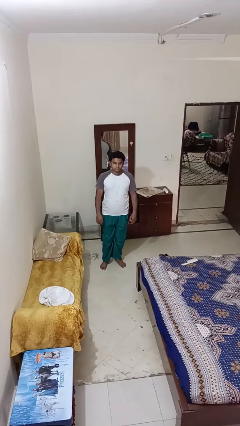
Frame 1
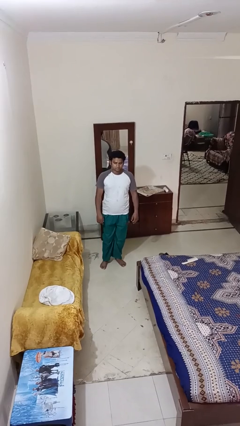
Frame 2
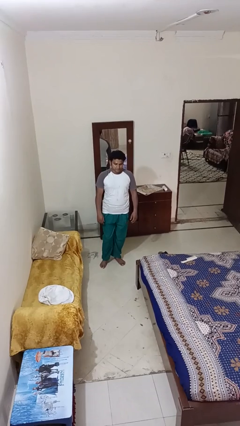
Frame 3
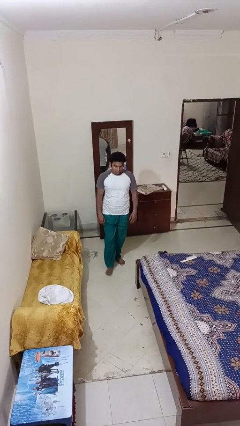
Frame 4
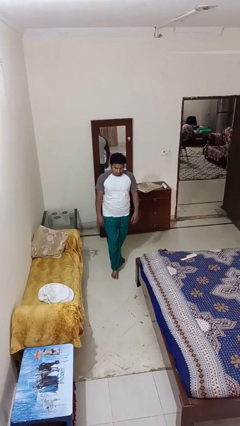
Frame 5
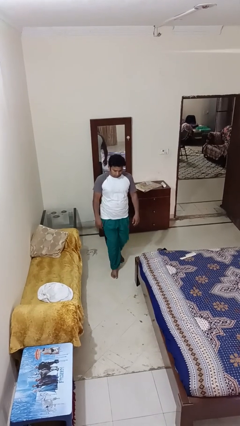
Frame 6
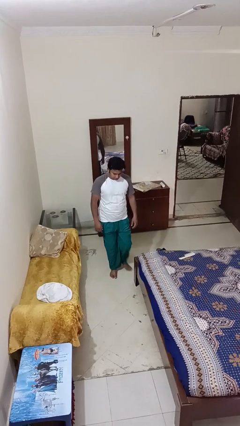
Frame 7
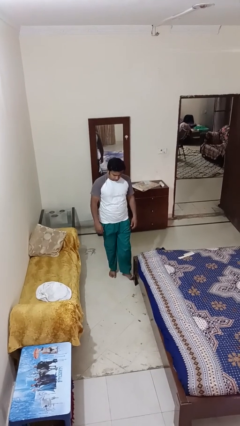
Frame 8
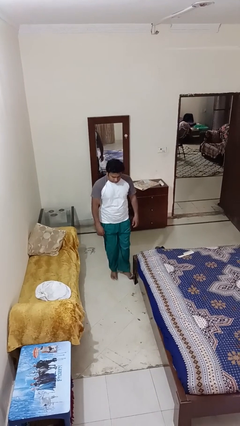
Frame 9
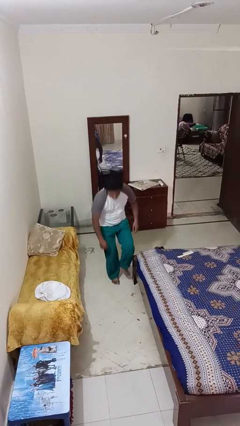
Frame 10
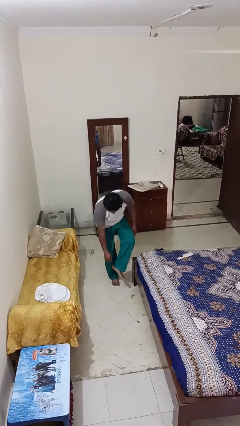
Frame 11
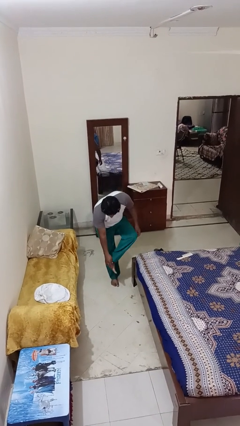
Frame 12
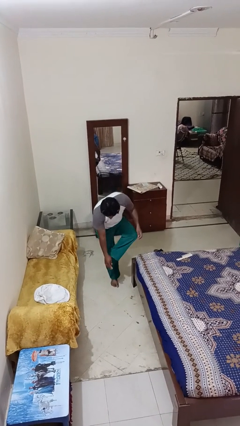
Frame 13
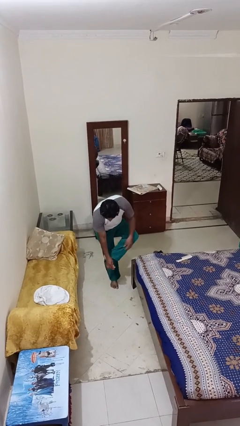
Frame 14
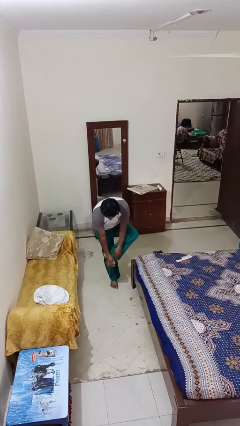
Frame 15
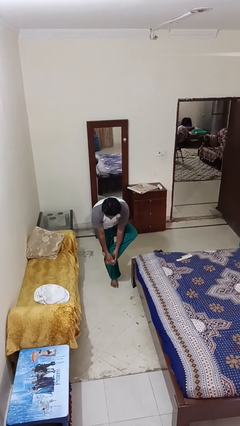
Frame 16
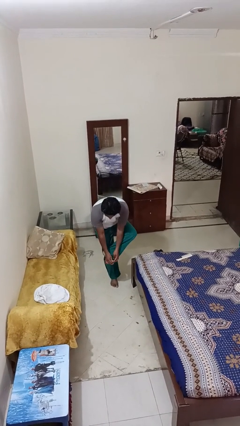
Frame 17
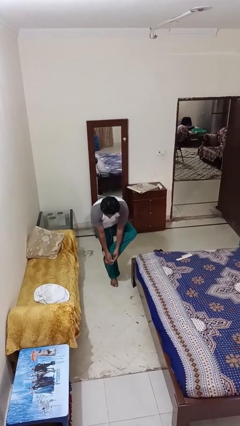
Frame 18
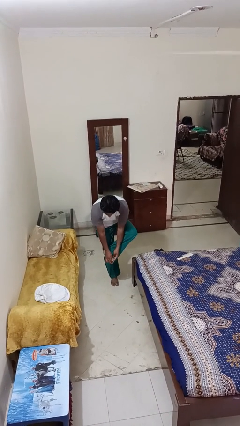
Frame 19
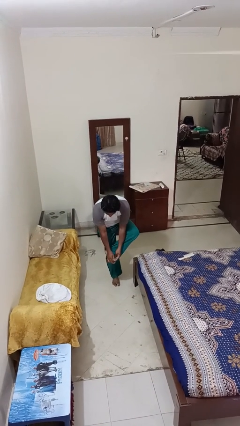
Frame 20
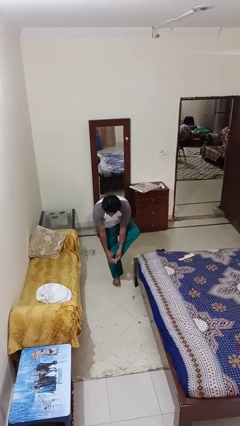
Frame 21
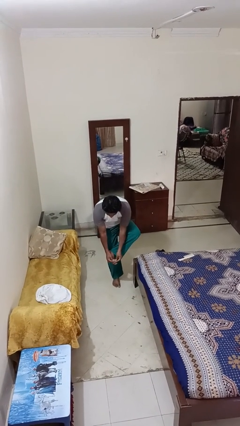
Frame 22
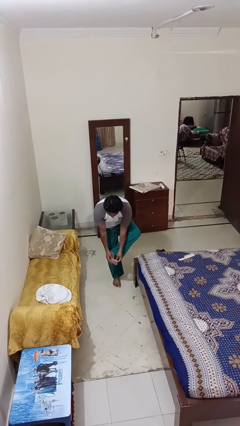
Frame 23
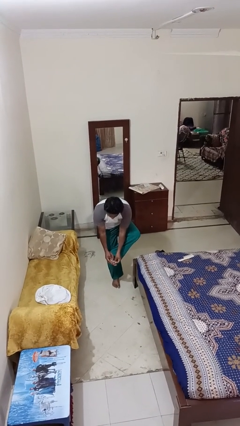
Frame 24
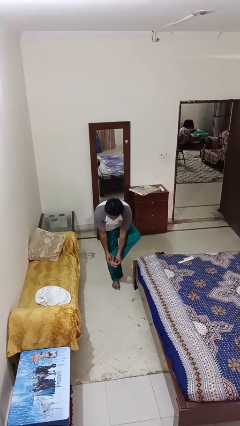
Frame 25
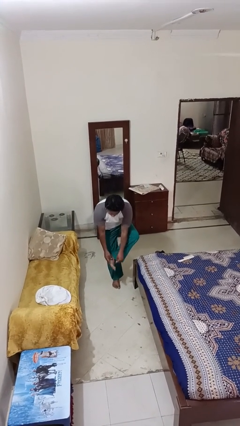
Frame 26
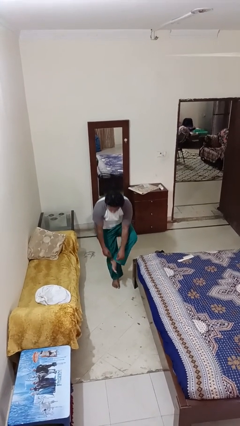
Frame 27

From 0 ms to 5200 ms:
person stubs toe

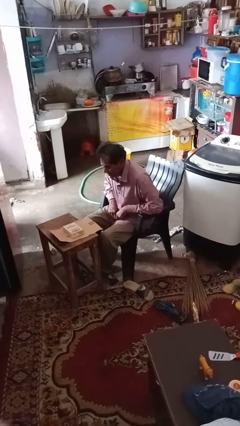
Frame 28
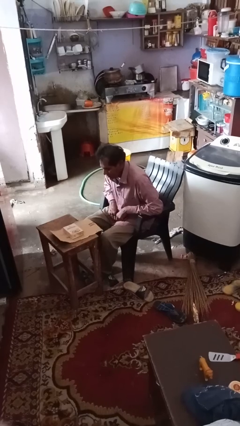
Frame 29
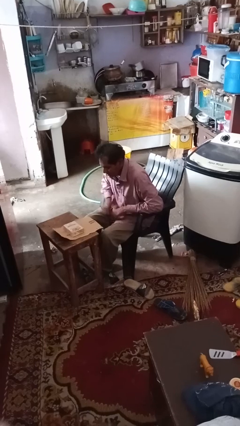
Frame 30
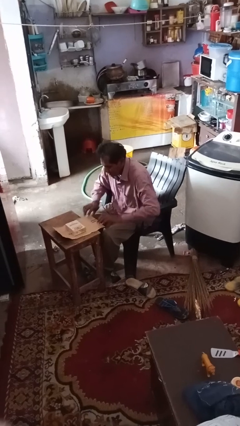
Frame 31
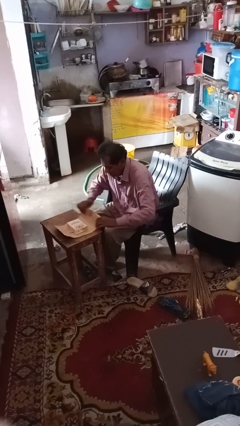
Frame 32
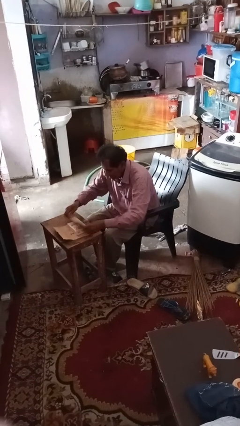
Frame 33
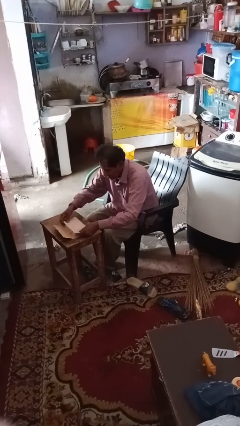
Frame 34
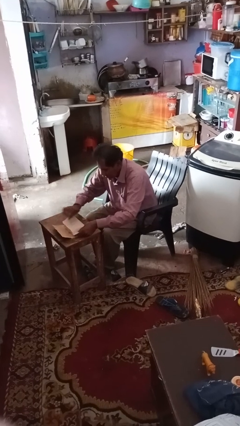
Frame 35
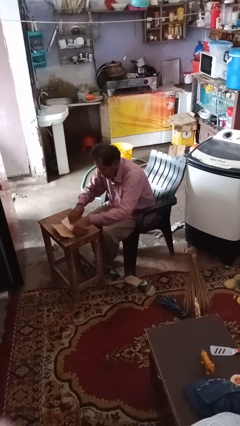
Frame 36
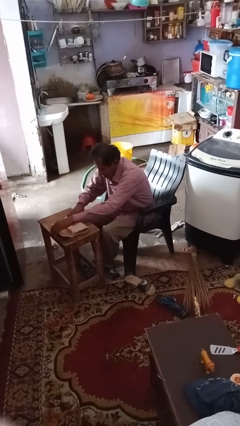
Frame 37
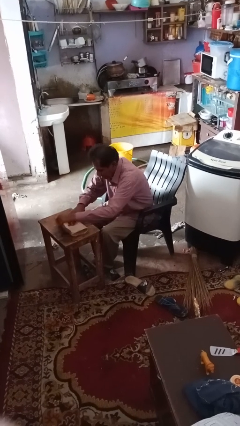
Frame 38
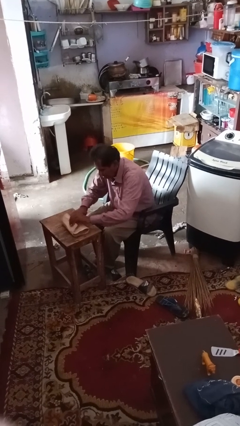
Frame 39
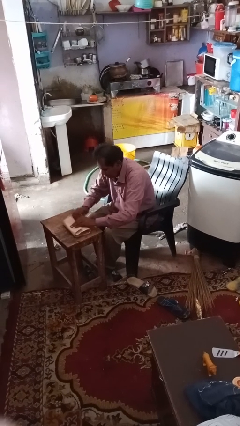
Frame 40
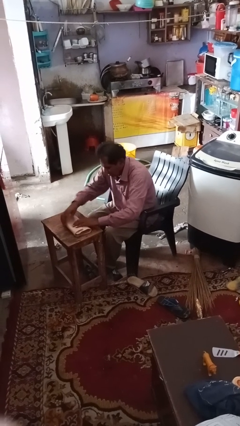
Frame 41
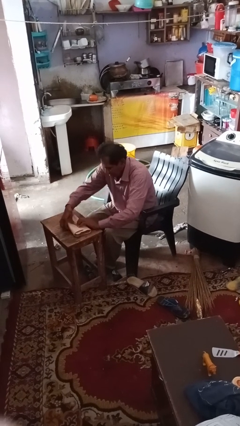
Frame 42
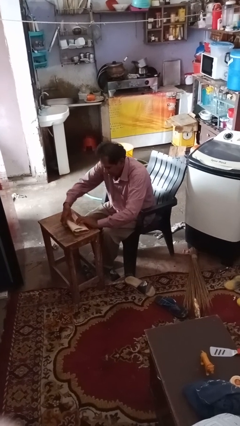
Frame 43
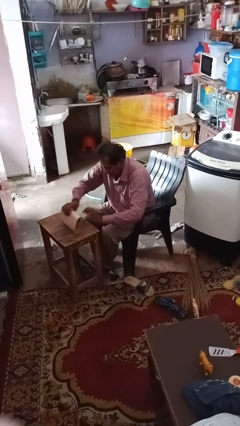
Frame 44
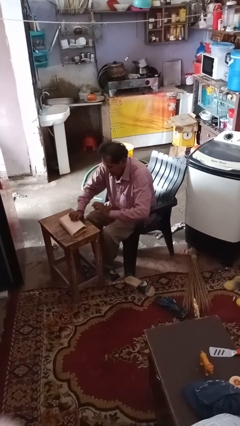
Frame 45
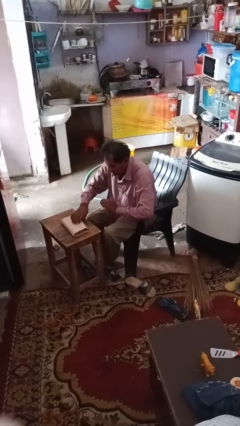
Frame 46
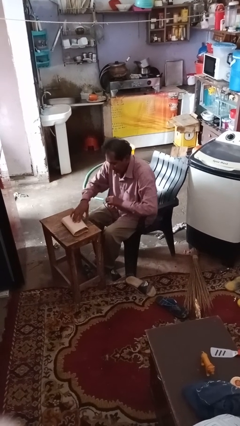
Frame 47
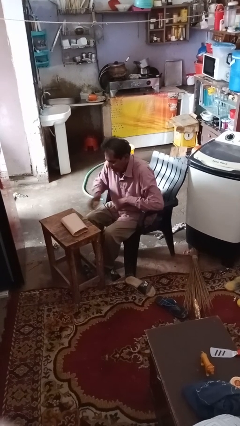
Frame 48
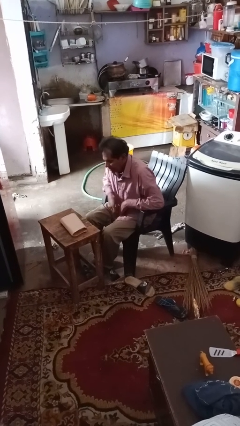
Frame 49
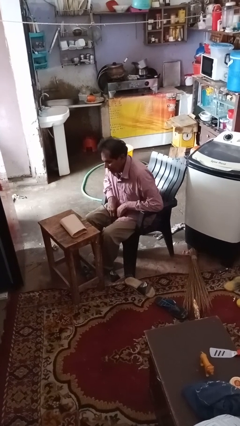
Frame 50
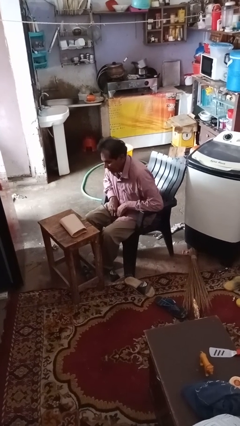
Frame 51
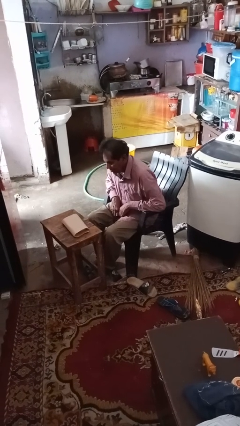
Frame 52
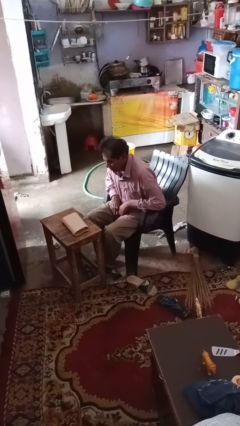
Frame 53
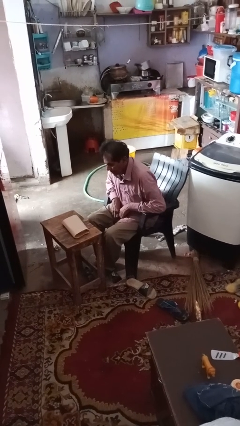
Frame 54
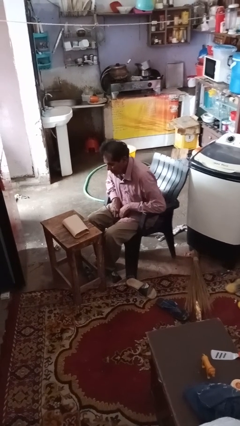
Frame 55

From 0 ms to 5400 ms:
person wraps box

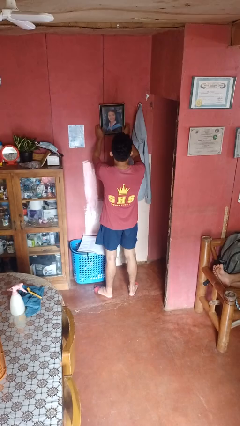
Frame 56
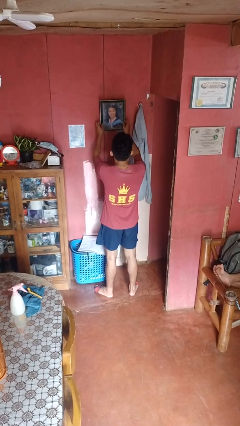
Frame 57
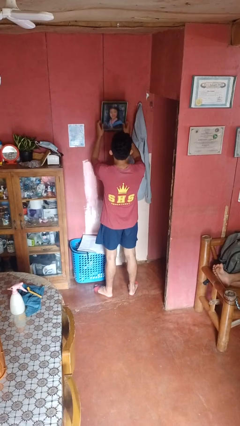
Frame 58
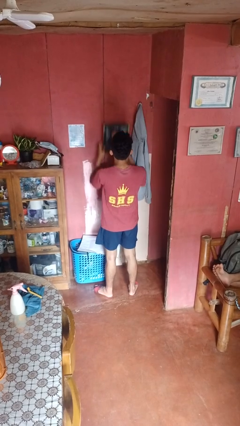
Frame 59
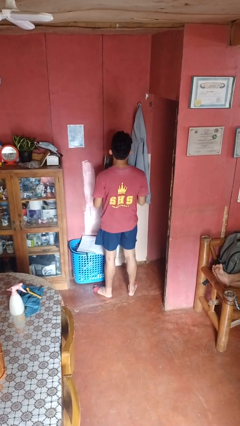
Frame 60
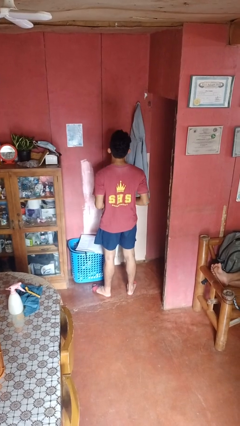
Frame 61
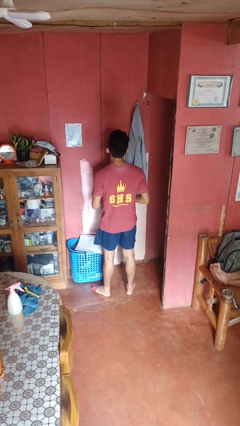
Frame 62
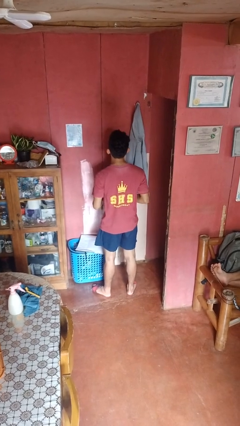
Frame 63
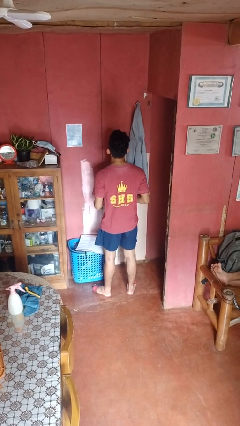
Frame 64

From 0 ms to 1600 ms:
person takes down picture frame

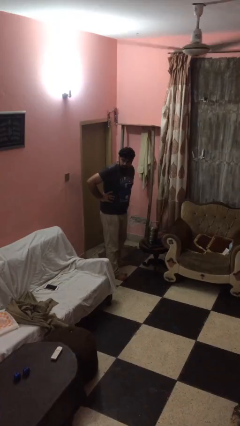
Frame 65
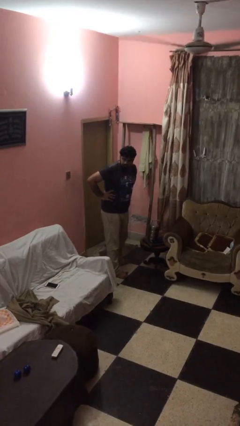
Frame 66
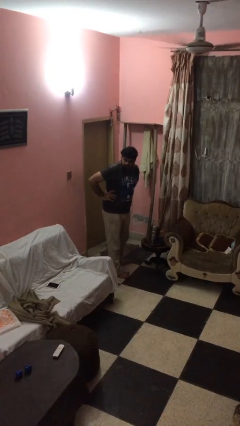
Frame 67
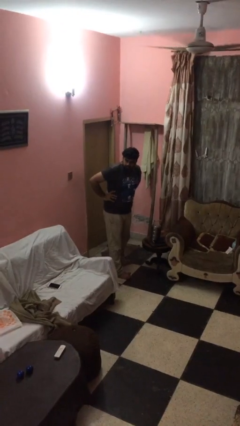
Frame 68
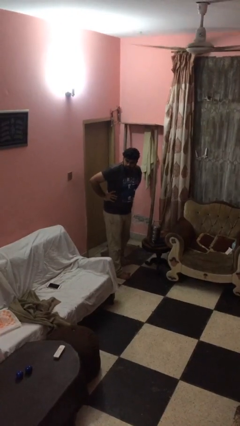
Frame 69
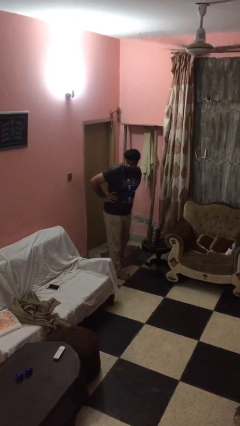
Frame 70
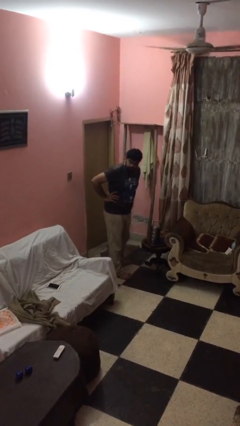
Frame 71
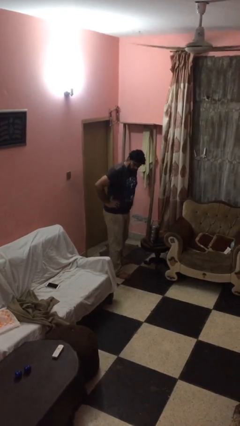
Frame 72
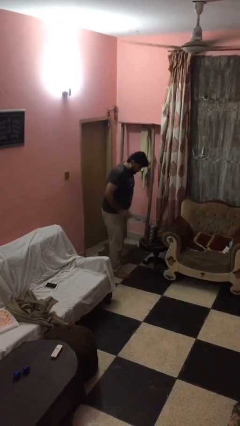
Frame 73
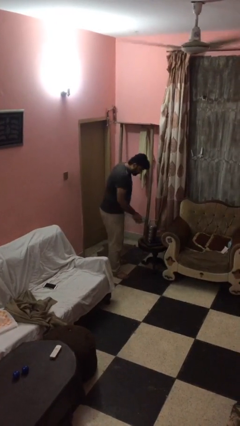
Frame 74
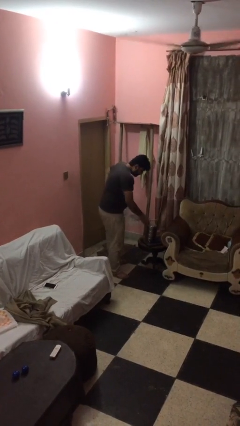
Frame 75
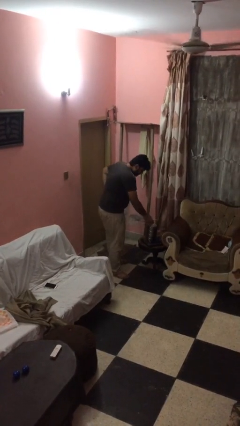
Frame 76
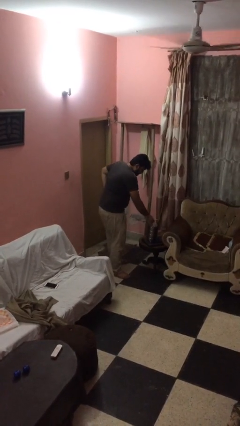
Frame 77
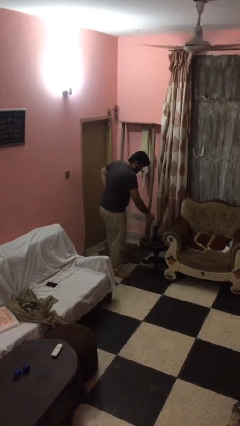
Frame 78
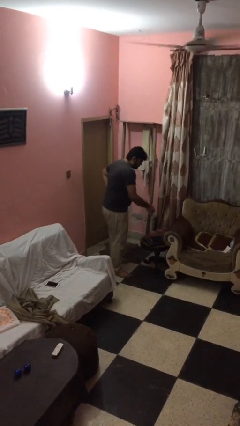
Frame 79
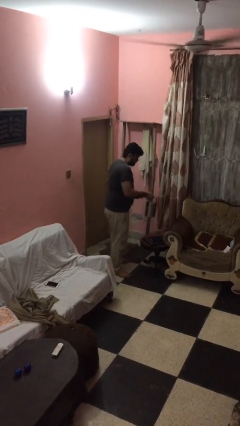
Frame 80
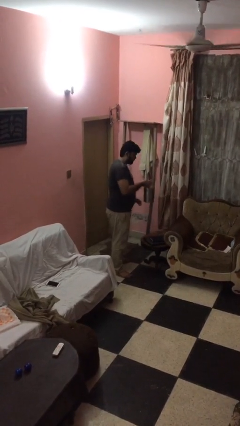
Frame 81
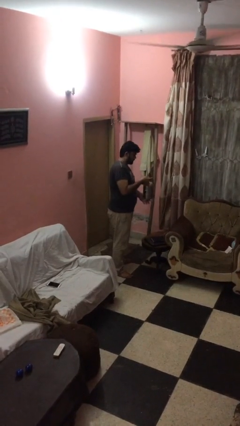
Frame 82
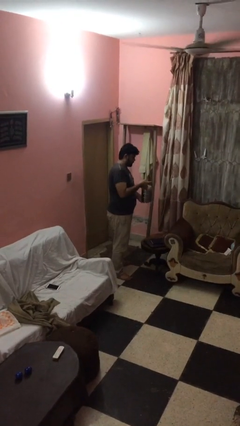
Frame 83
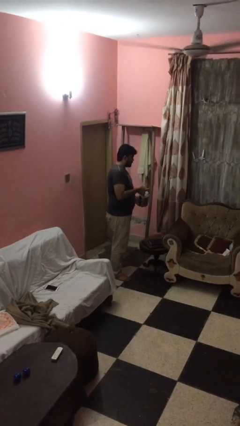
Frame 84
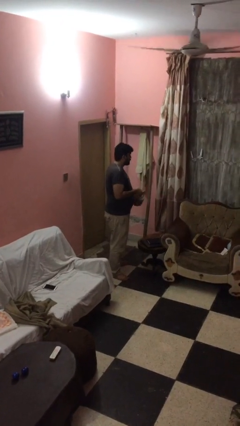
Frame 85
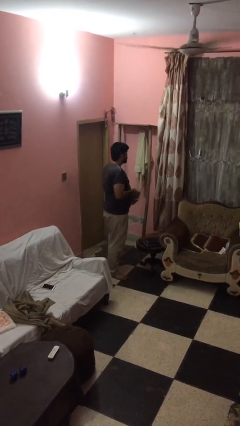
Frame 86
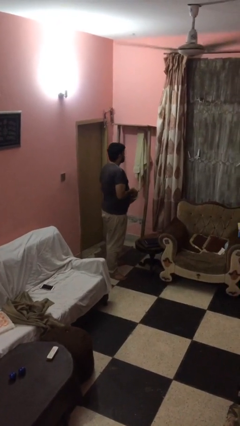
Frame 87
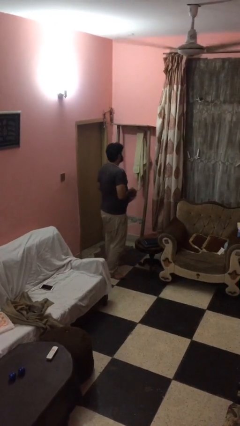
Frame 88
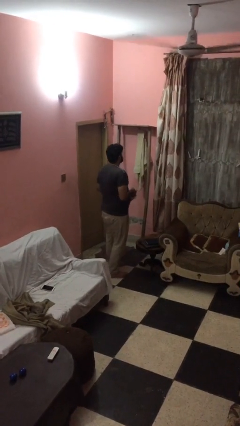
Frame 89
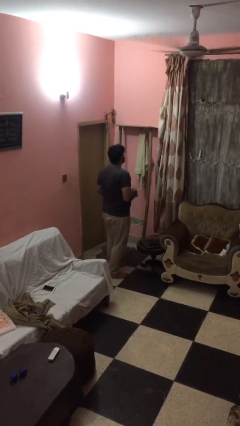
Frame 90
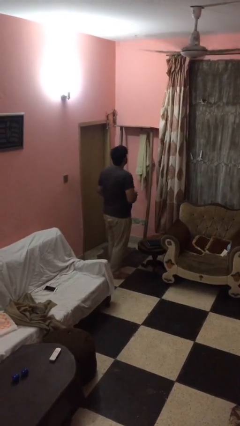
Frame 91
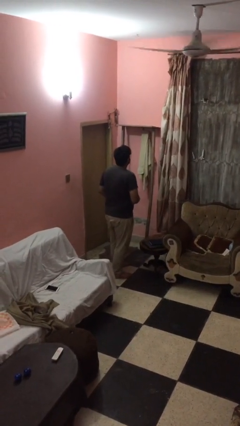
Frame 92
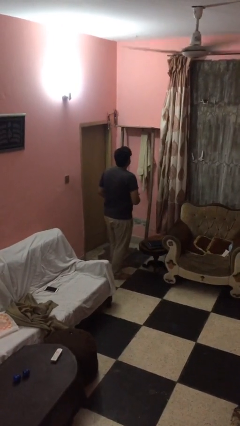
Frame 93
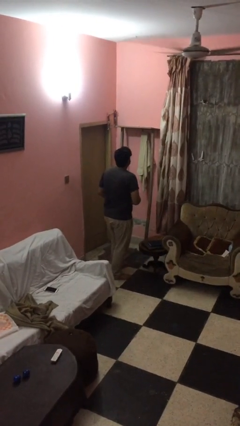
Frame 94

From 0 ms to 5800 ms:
person picks up object from table
